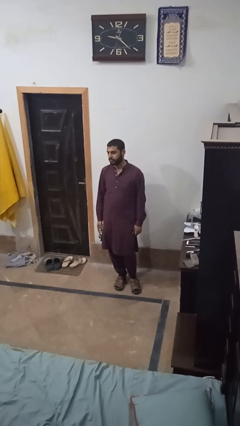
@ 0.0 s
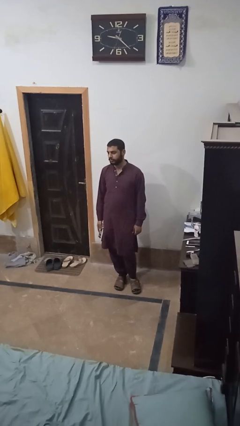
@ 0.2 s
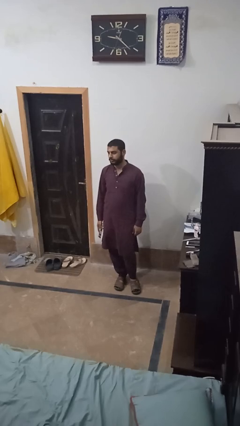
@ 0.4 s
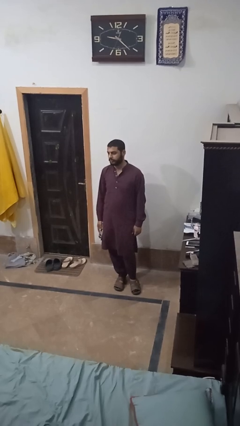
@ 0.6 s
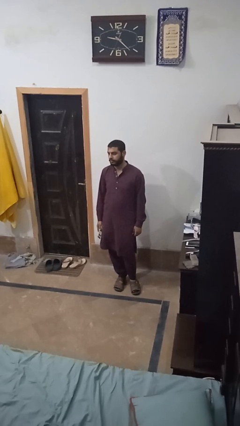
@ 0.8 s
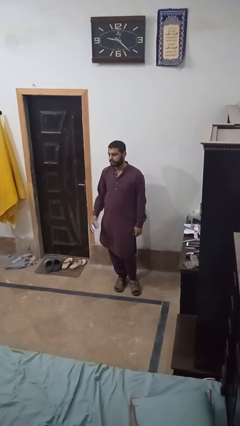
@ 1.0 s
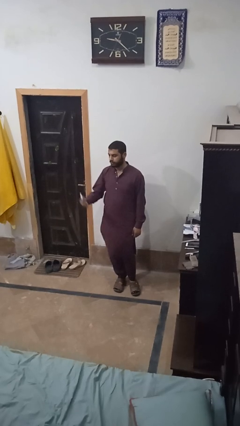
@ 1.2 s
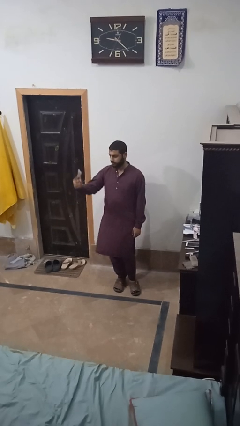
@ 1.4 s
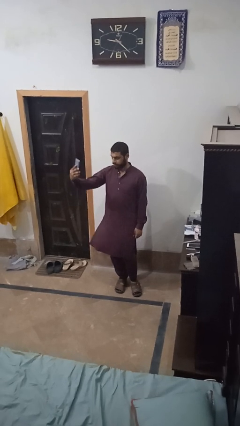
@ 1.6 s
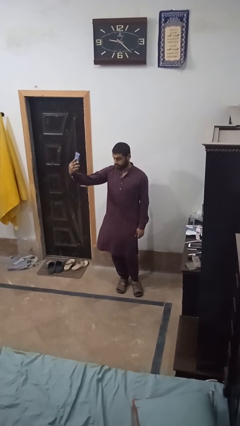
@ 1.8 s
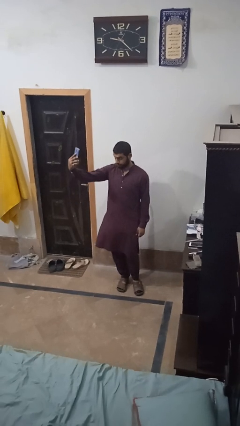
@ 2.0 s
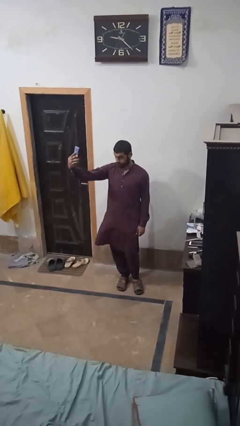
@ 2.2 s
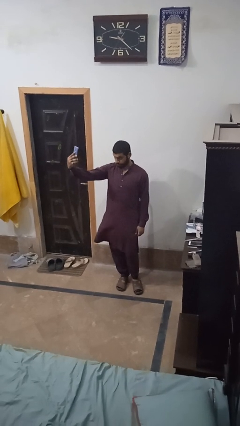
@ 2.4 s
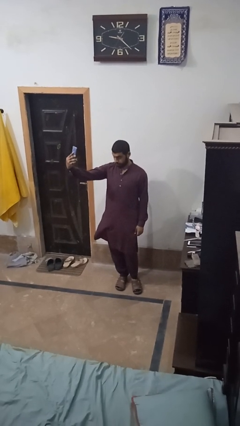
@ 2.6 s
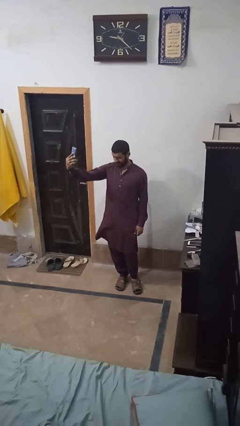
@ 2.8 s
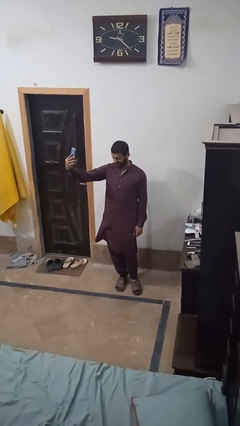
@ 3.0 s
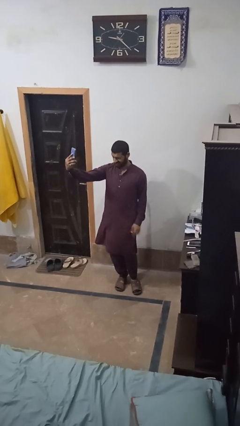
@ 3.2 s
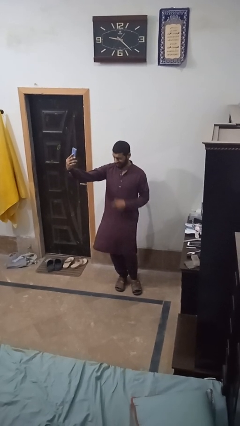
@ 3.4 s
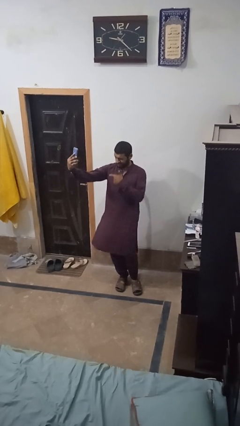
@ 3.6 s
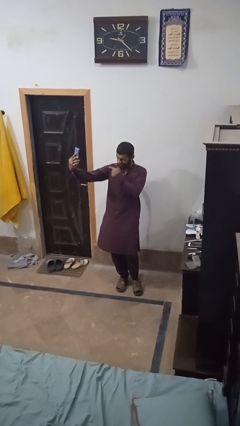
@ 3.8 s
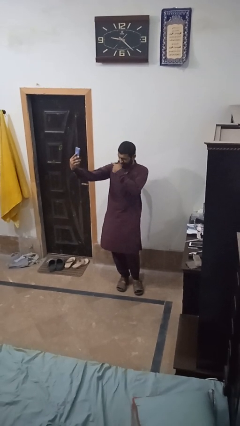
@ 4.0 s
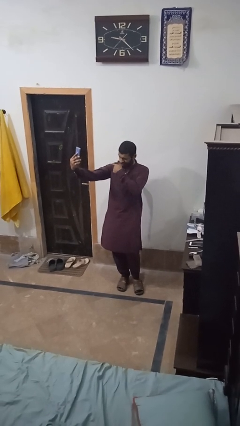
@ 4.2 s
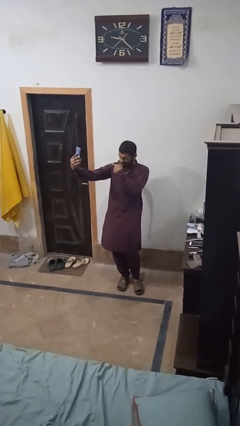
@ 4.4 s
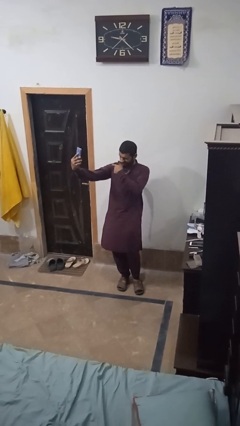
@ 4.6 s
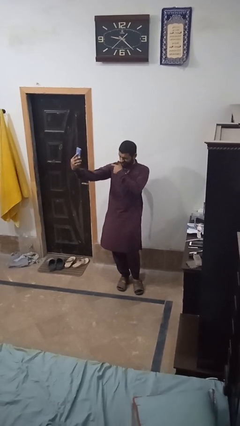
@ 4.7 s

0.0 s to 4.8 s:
person takes selfie

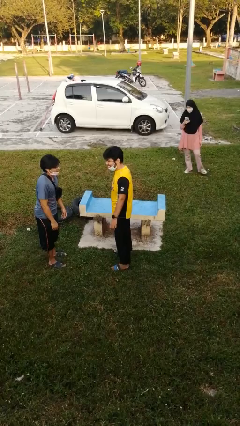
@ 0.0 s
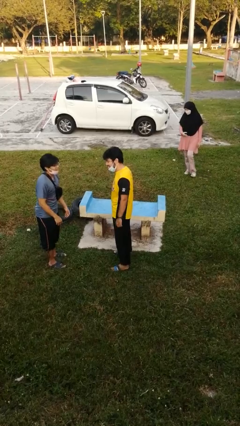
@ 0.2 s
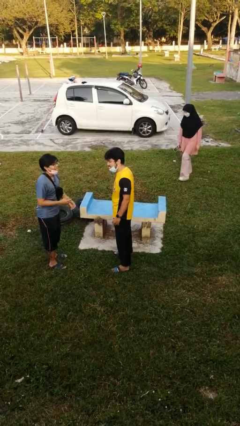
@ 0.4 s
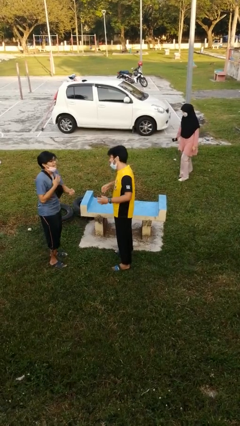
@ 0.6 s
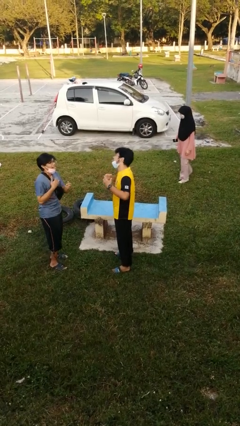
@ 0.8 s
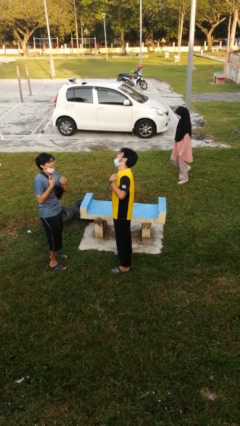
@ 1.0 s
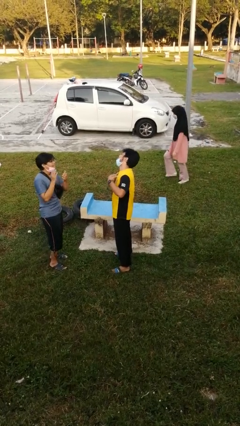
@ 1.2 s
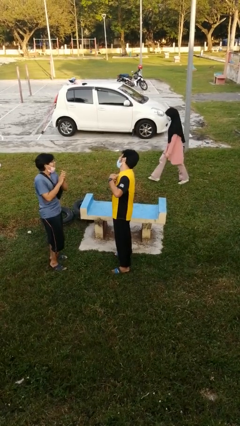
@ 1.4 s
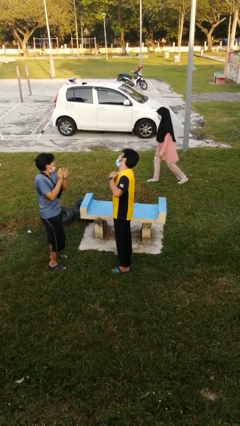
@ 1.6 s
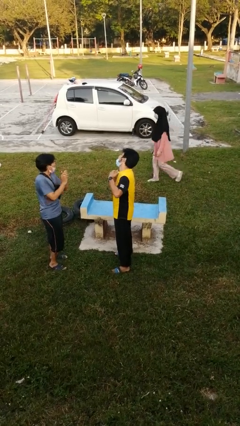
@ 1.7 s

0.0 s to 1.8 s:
person laughs with person

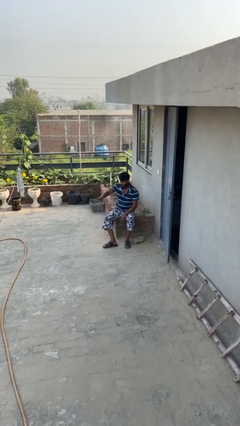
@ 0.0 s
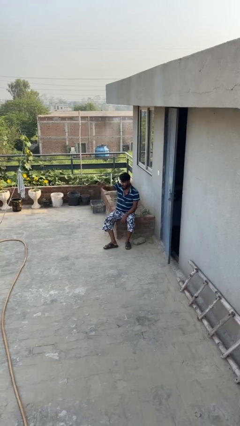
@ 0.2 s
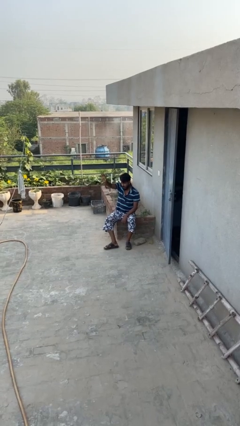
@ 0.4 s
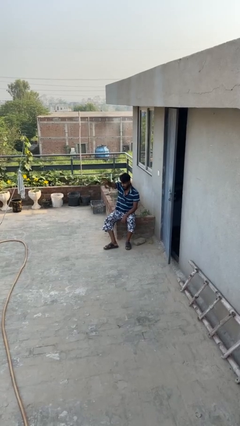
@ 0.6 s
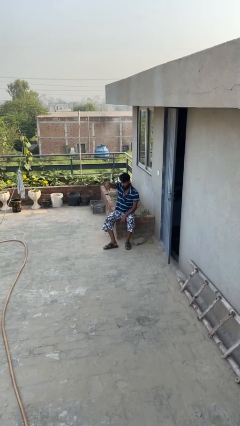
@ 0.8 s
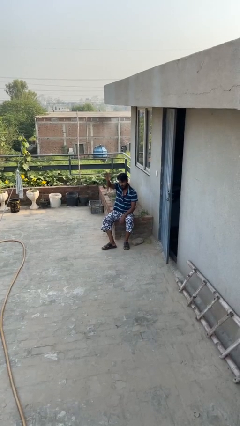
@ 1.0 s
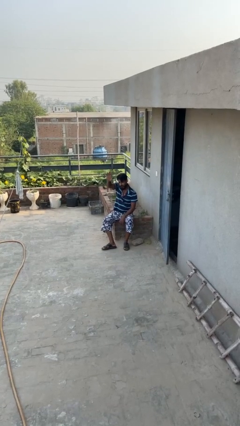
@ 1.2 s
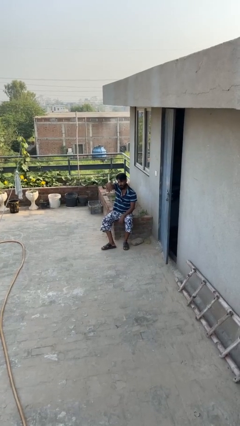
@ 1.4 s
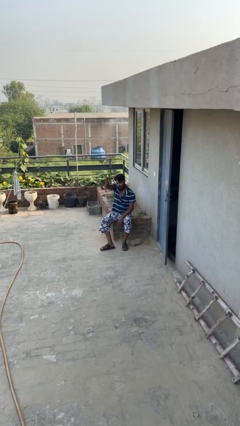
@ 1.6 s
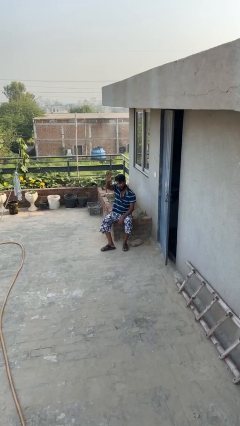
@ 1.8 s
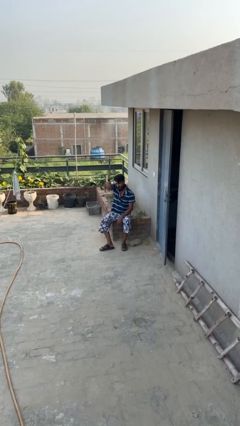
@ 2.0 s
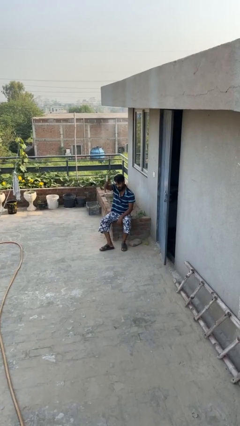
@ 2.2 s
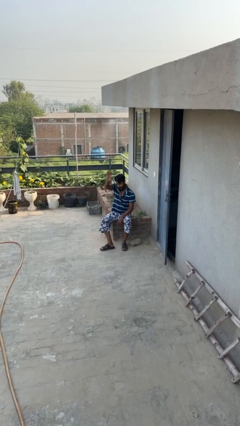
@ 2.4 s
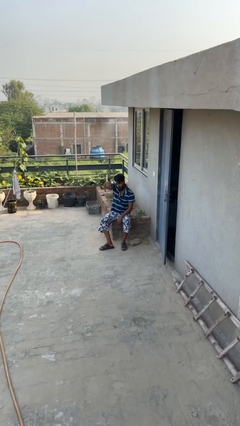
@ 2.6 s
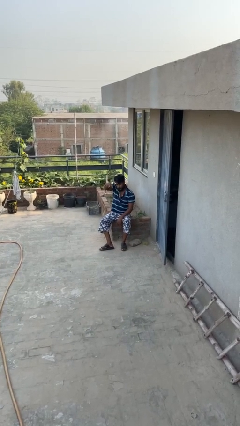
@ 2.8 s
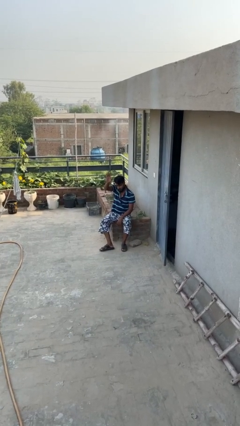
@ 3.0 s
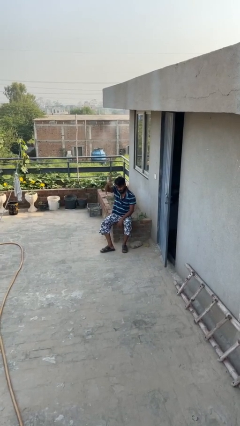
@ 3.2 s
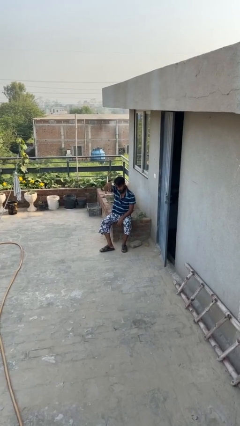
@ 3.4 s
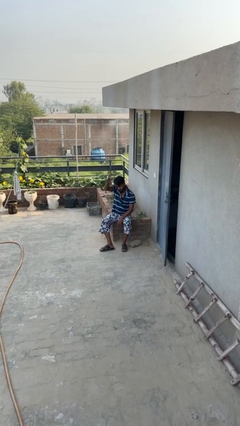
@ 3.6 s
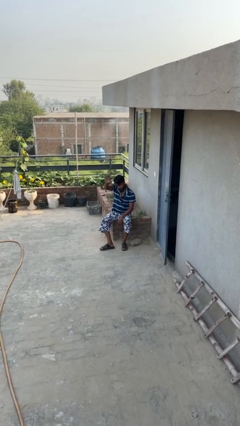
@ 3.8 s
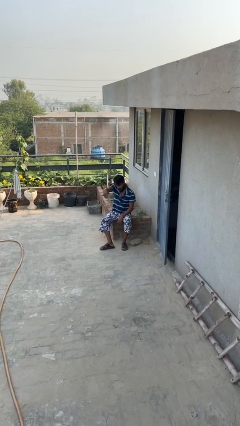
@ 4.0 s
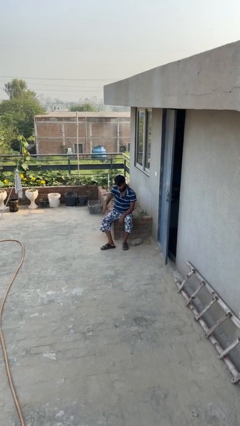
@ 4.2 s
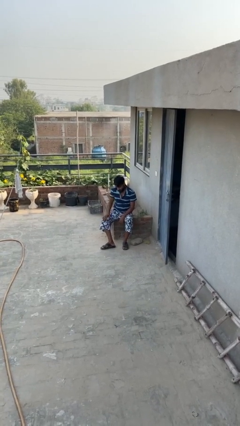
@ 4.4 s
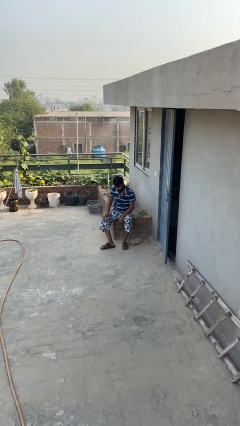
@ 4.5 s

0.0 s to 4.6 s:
person gestures come here

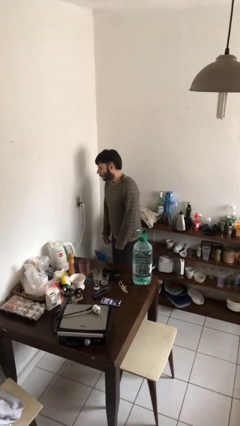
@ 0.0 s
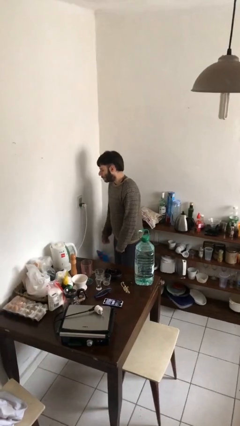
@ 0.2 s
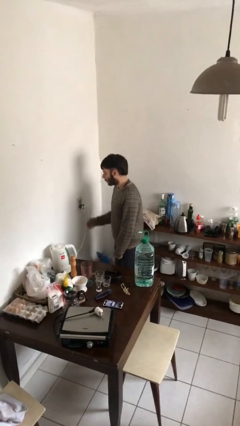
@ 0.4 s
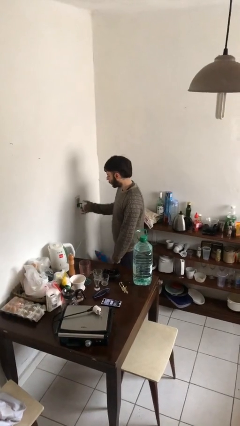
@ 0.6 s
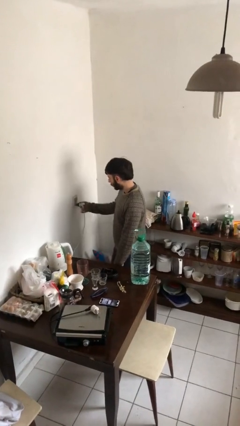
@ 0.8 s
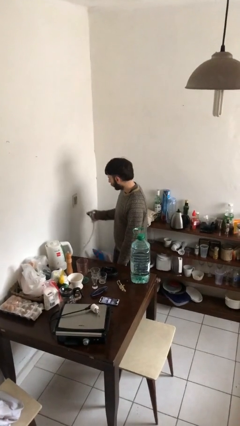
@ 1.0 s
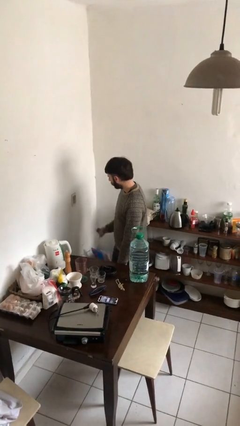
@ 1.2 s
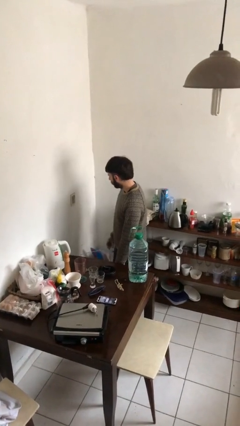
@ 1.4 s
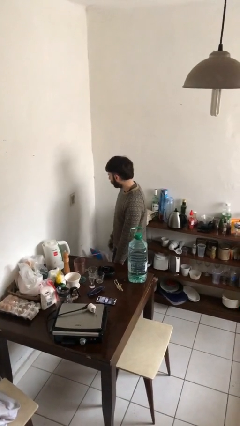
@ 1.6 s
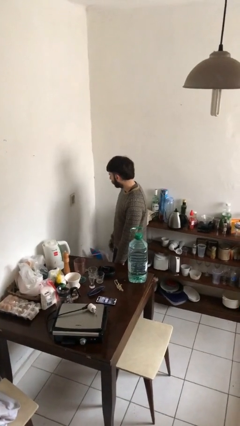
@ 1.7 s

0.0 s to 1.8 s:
person unplugs from electrical socket

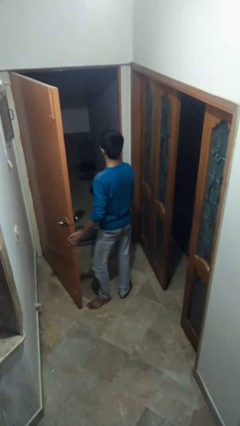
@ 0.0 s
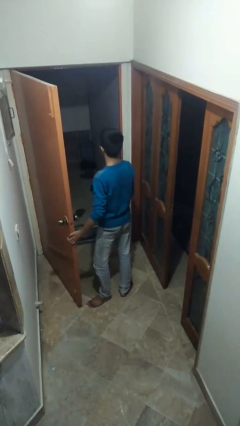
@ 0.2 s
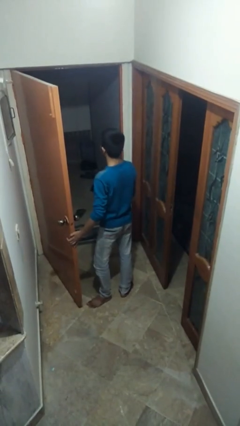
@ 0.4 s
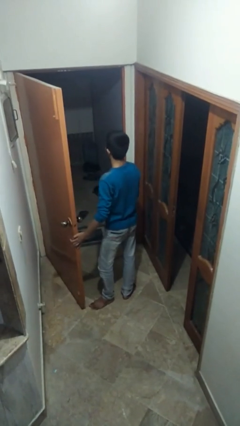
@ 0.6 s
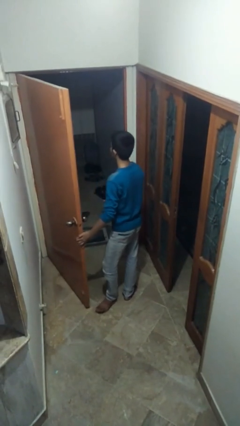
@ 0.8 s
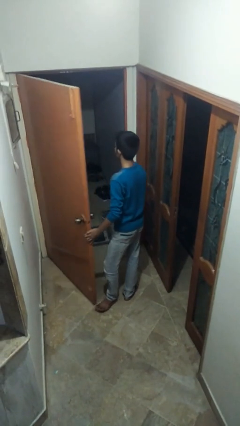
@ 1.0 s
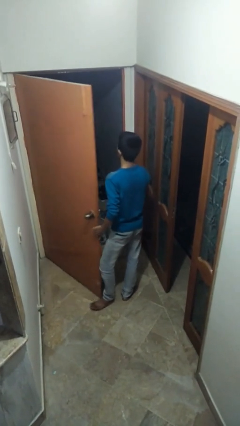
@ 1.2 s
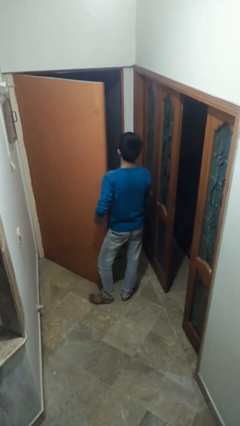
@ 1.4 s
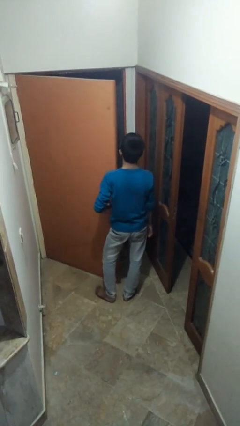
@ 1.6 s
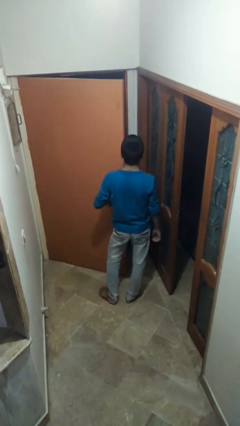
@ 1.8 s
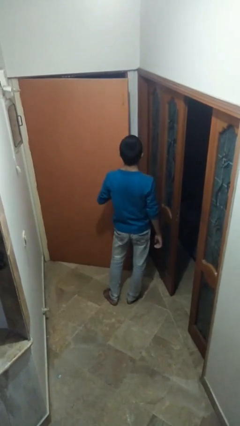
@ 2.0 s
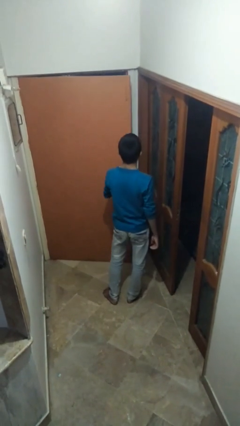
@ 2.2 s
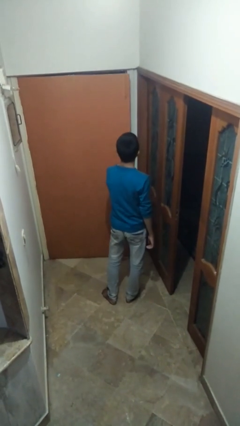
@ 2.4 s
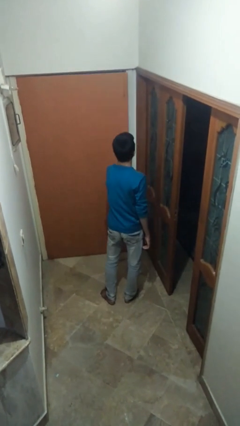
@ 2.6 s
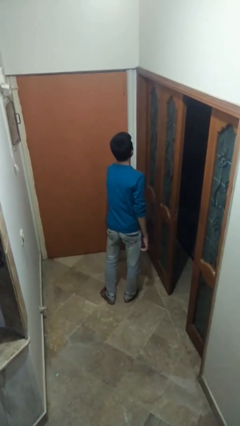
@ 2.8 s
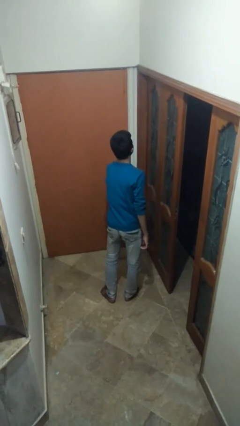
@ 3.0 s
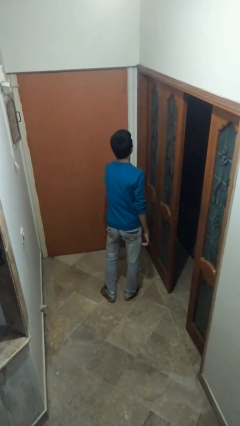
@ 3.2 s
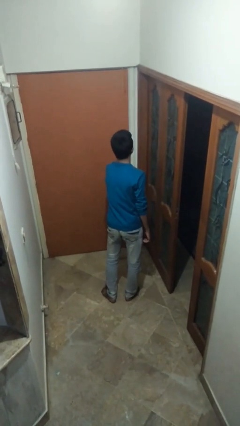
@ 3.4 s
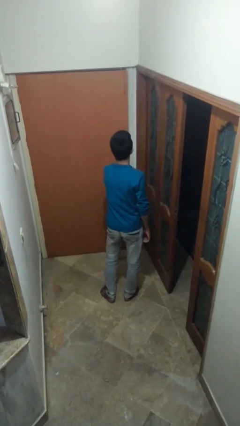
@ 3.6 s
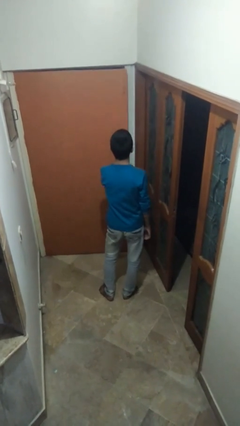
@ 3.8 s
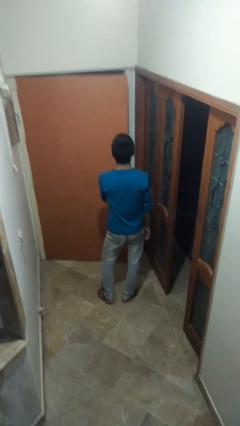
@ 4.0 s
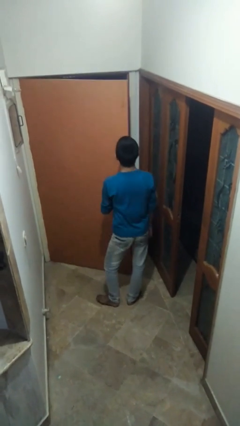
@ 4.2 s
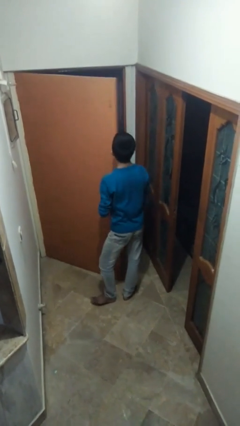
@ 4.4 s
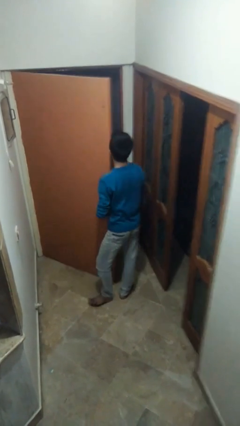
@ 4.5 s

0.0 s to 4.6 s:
person closes facility door
